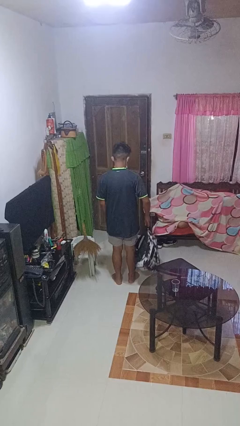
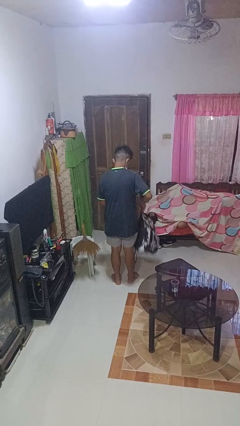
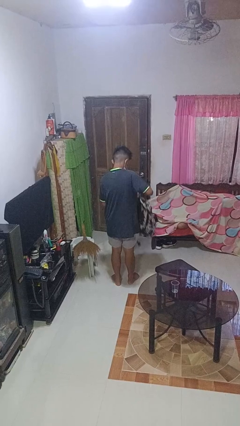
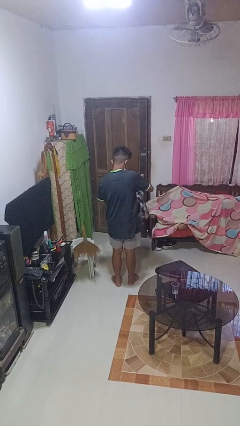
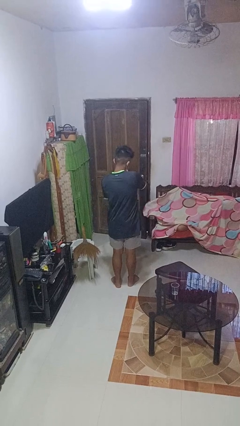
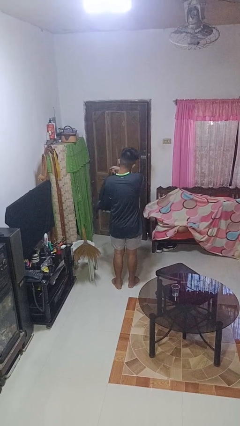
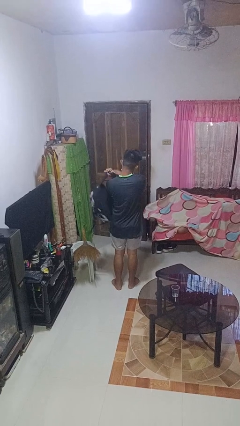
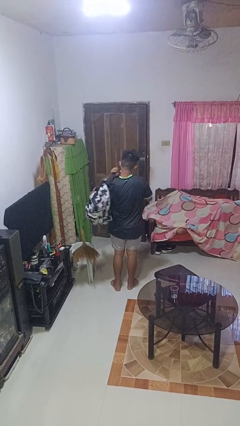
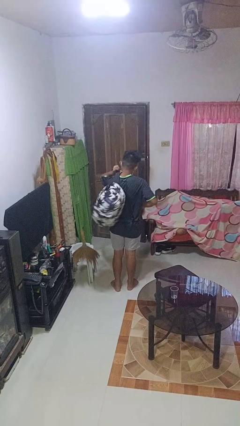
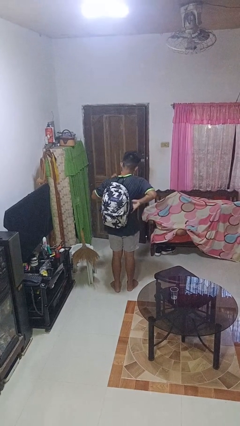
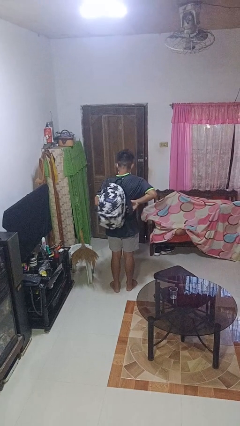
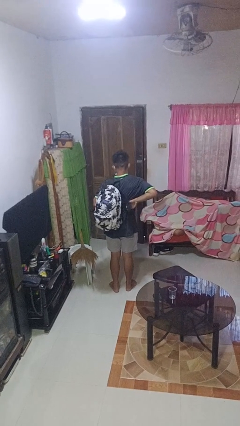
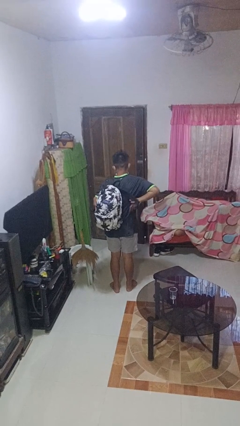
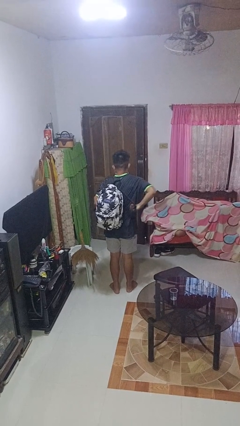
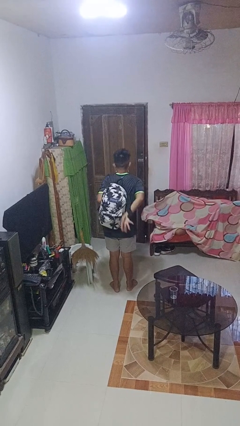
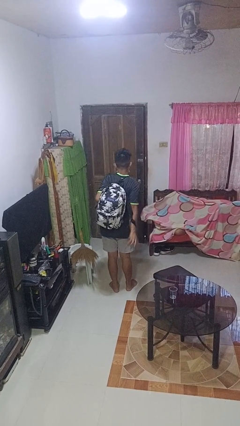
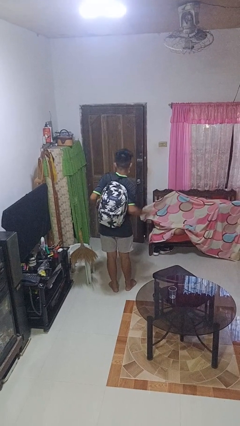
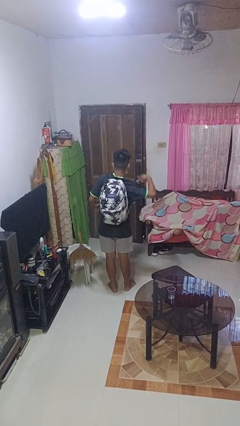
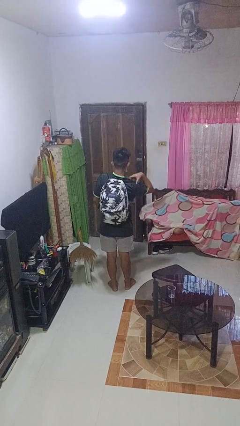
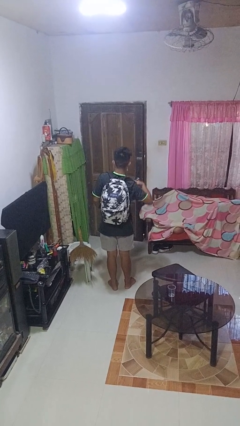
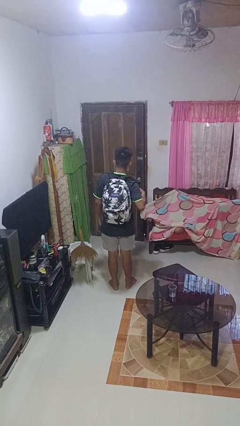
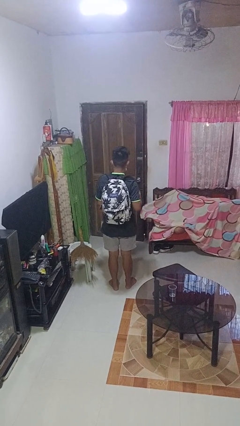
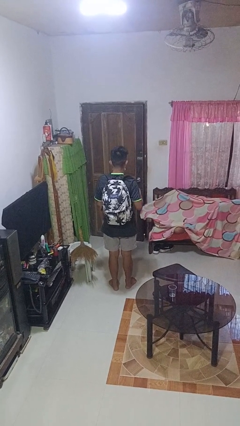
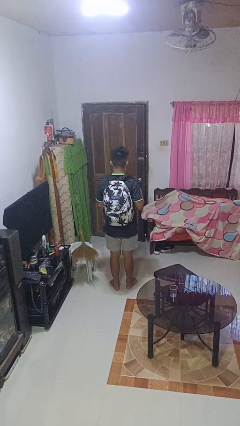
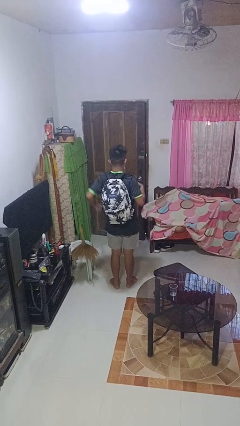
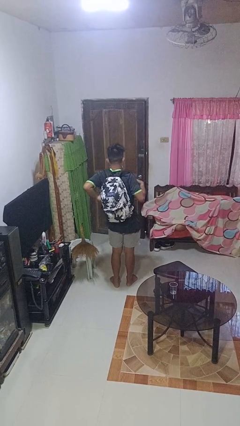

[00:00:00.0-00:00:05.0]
person puts on backpack

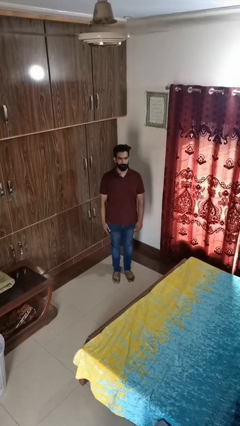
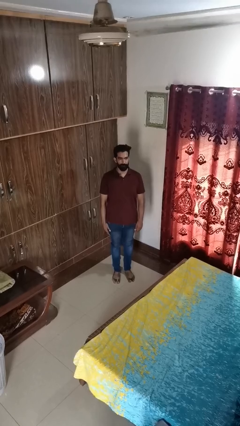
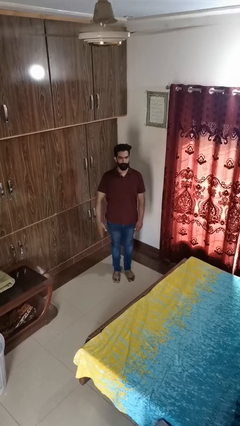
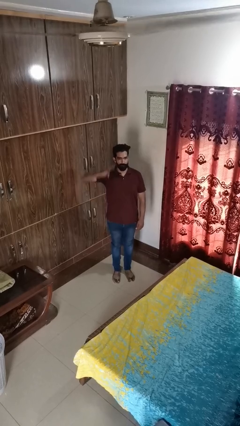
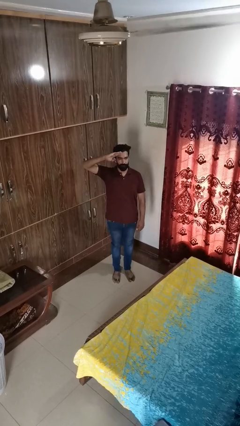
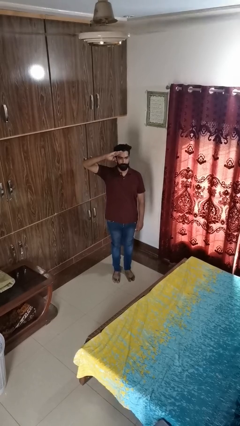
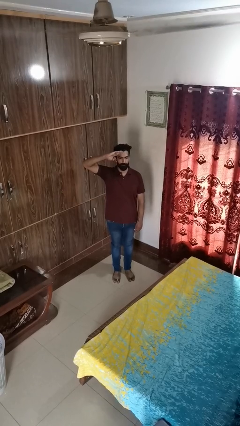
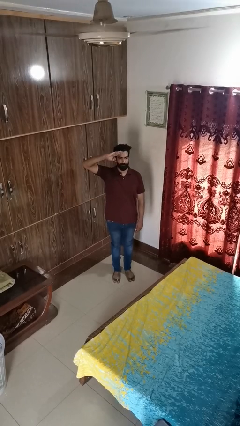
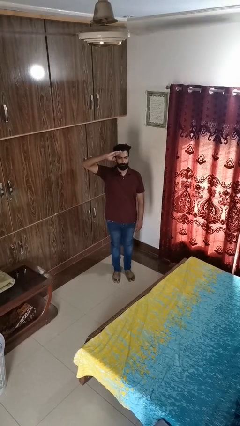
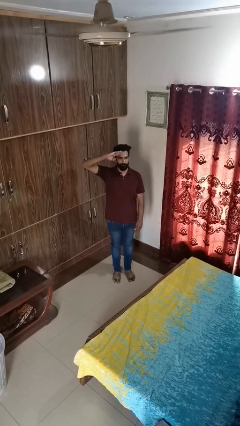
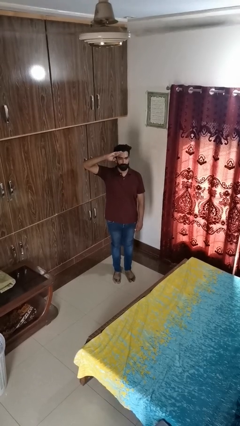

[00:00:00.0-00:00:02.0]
person salutes

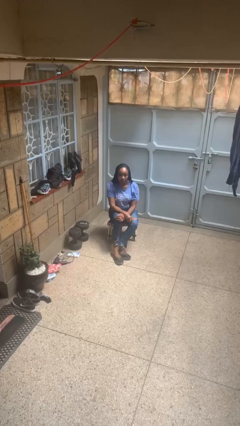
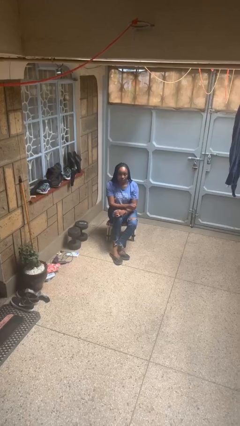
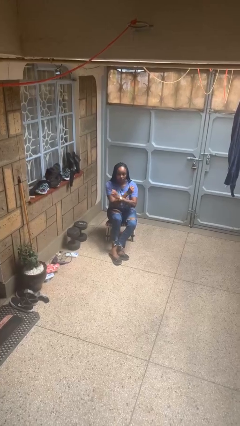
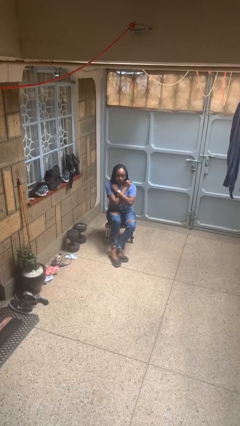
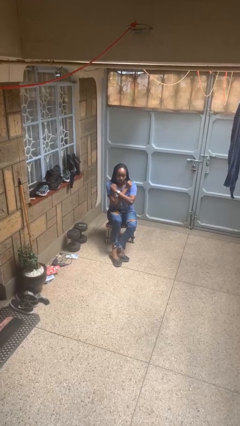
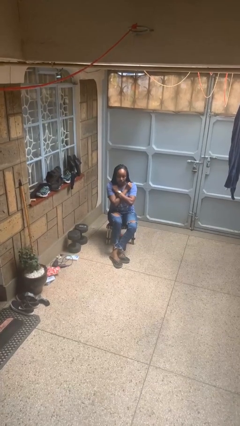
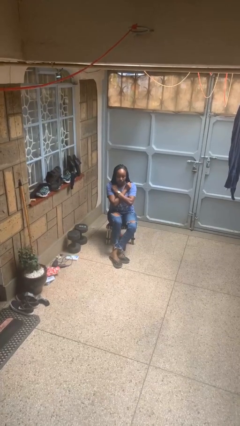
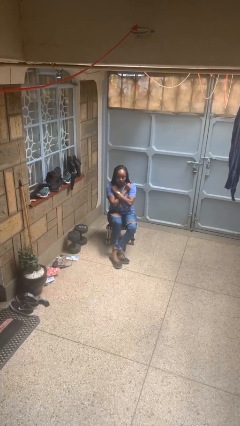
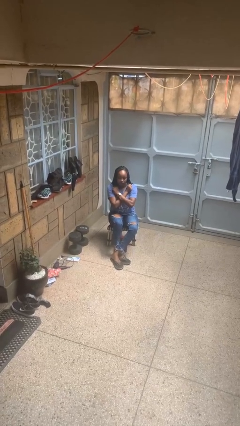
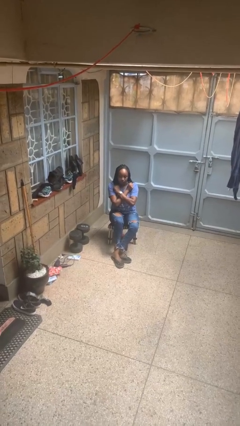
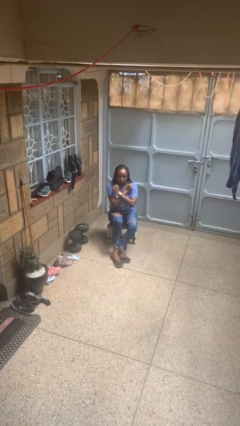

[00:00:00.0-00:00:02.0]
person gestures arms x

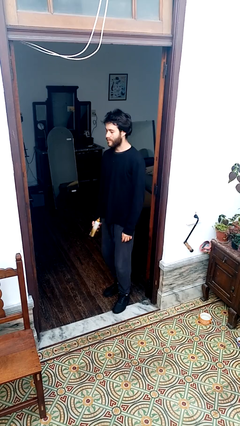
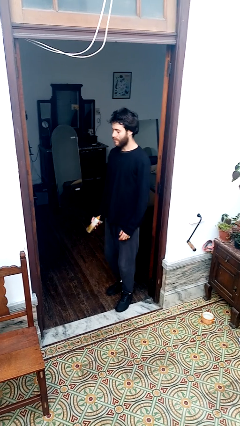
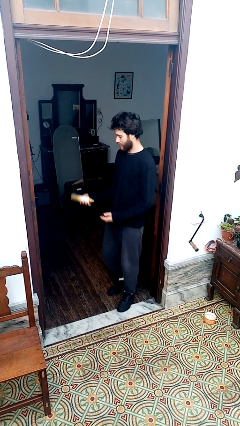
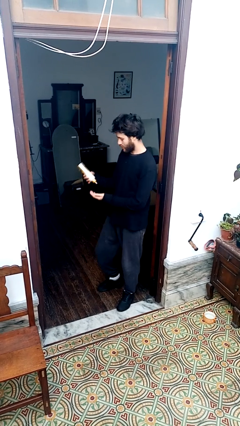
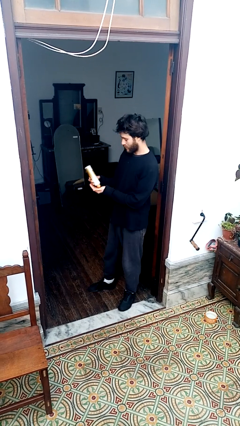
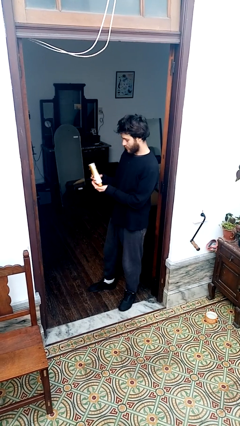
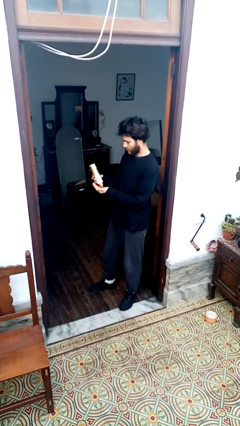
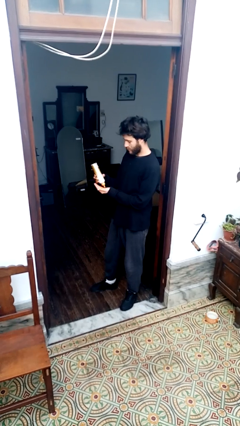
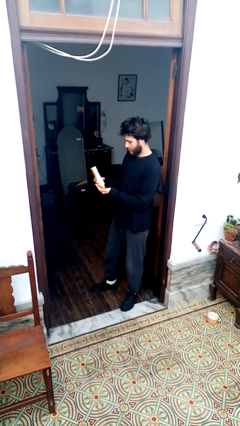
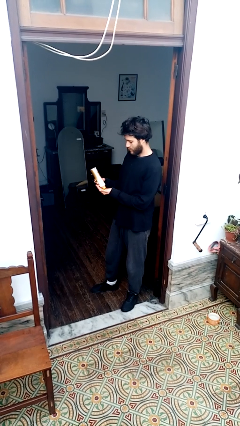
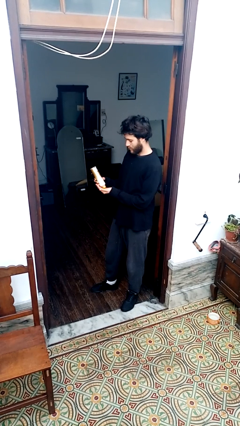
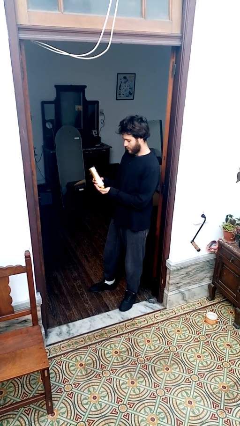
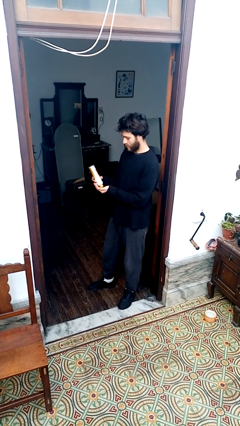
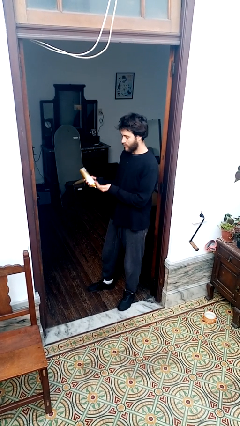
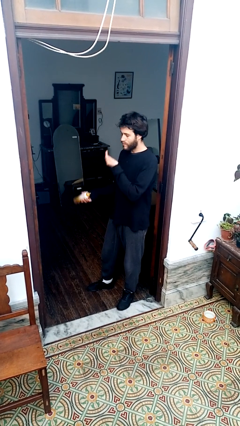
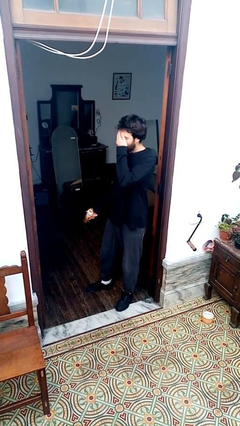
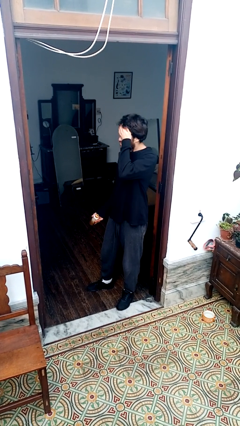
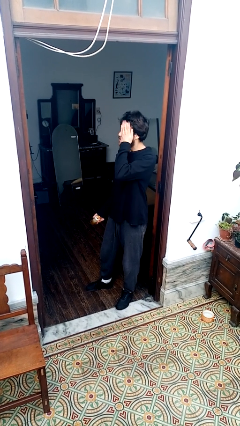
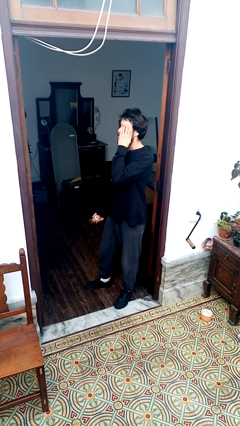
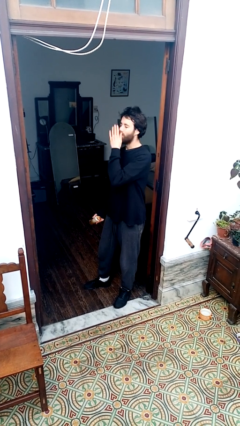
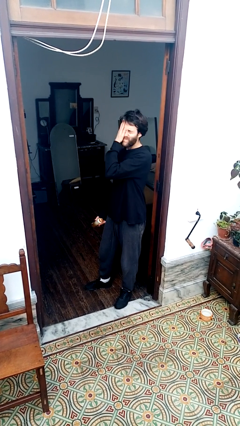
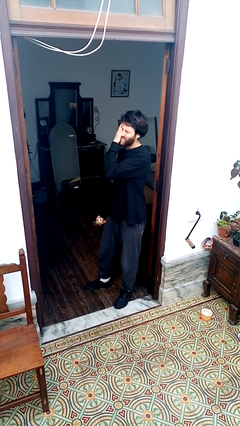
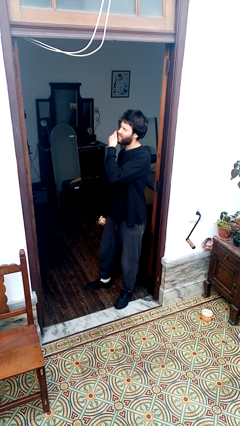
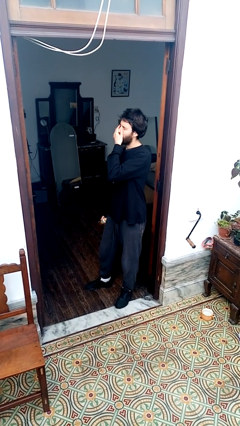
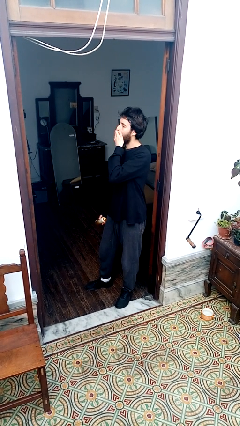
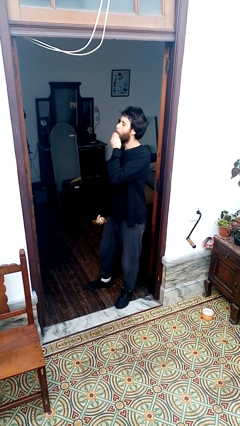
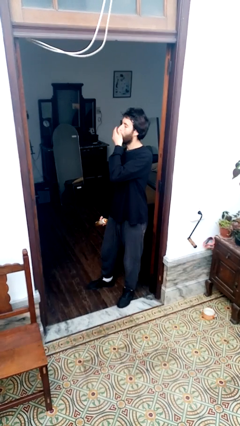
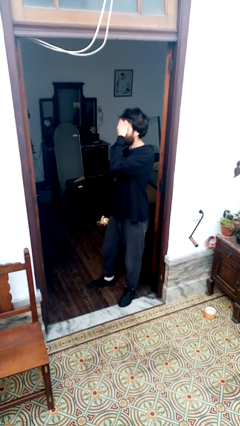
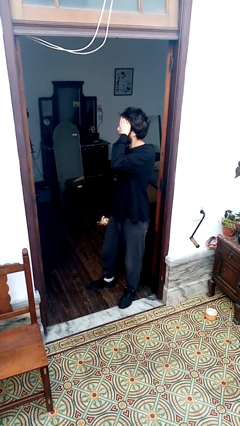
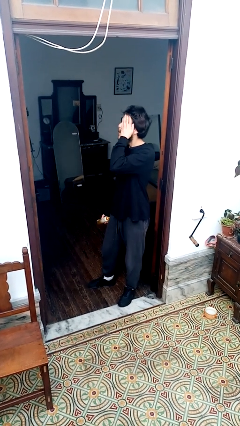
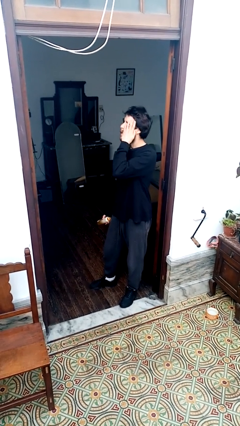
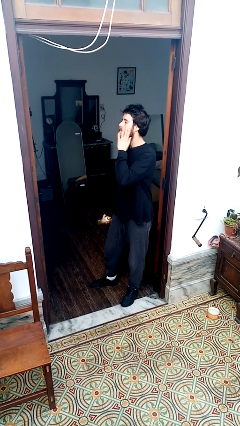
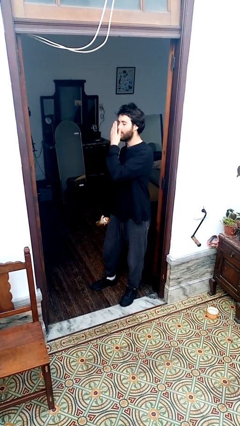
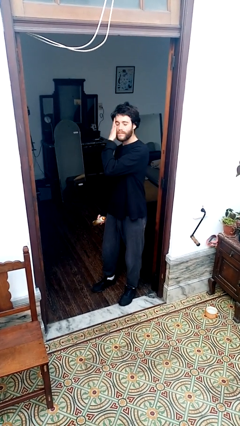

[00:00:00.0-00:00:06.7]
person applies facial moisturizer

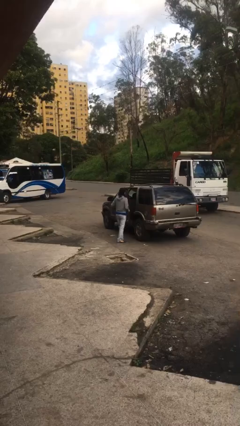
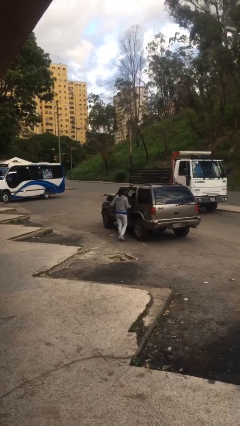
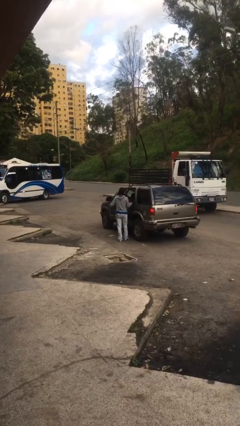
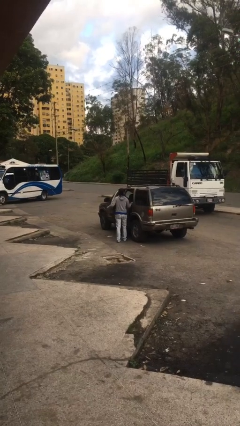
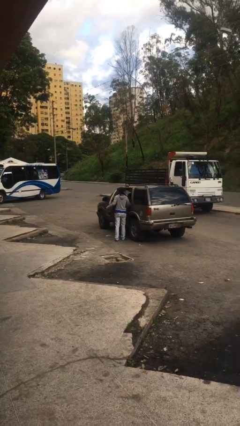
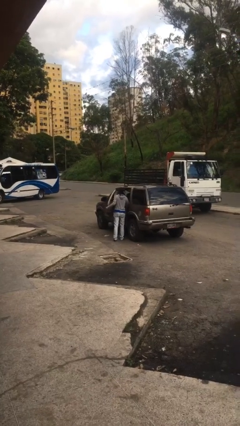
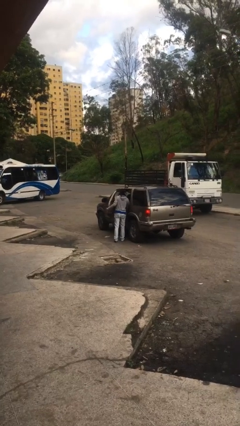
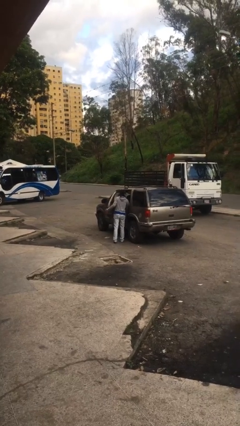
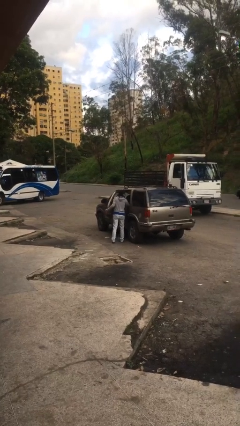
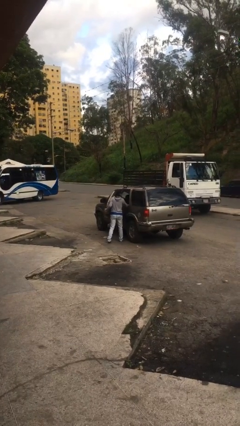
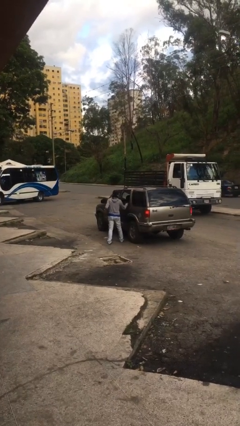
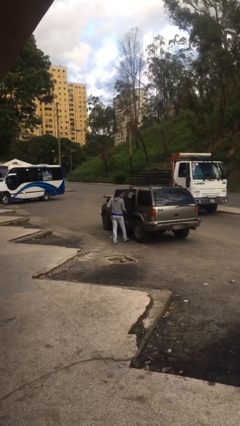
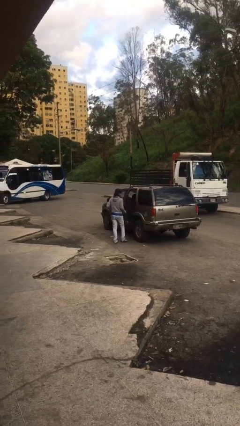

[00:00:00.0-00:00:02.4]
person loads car
